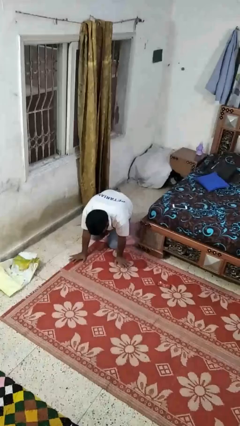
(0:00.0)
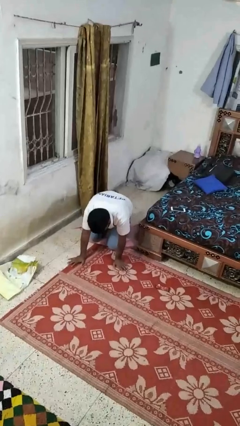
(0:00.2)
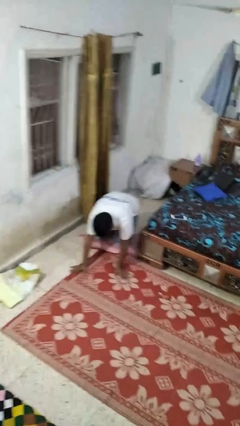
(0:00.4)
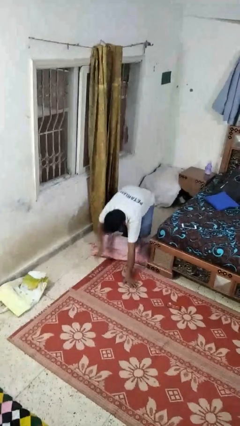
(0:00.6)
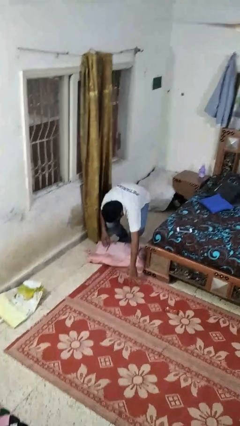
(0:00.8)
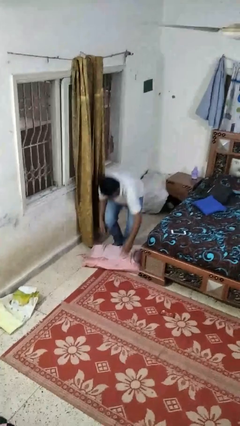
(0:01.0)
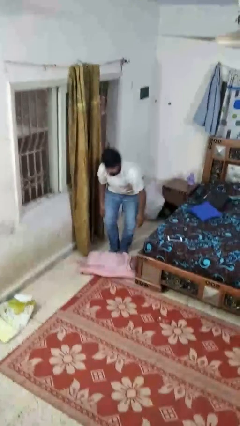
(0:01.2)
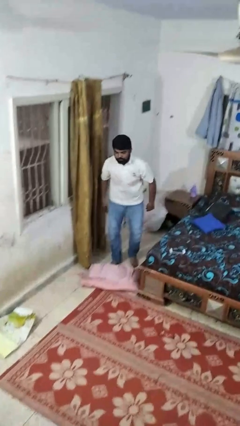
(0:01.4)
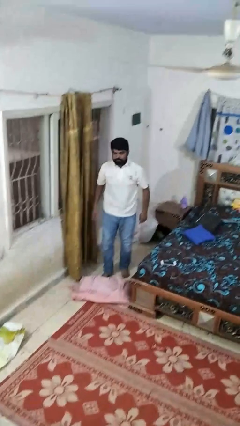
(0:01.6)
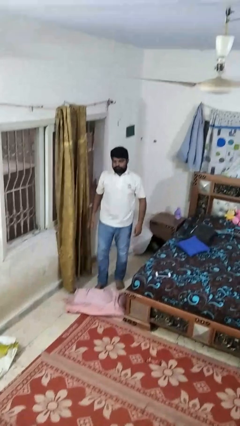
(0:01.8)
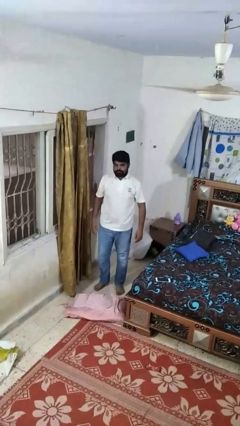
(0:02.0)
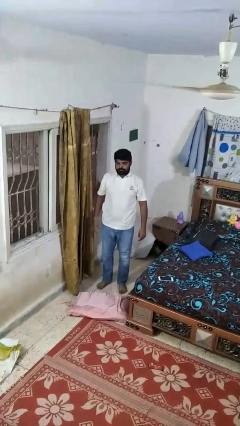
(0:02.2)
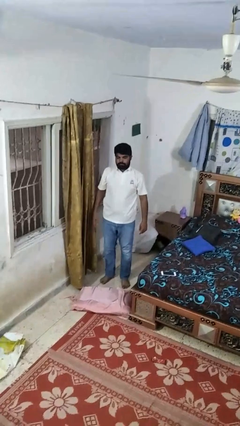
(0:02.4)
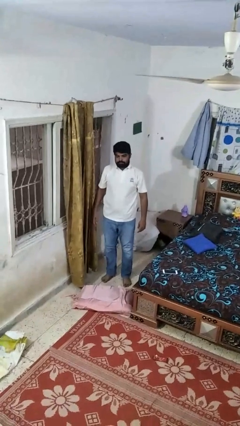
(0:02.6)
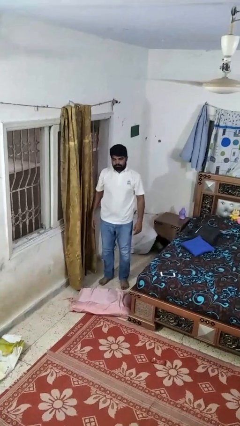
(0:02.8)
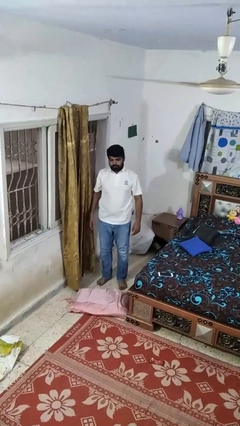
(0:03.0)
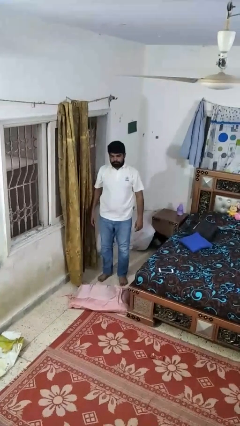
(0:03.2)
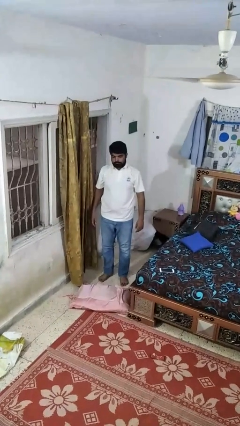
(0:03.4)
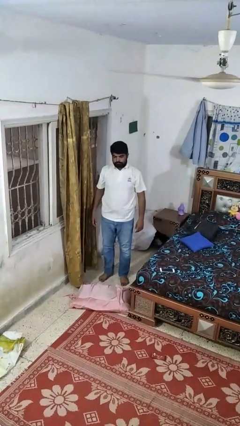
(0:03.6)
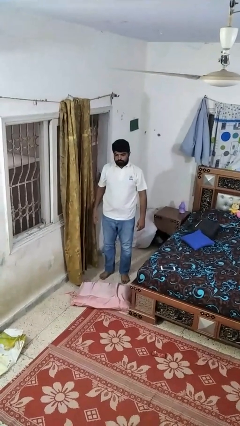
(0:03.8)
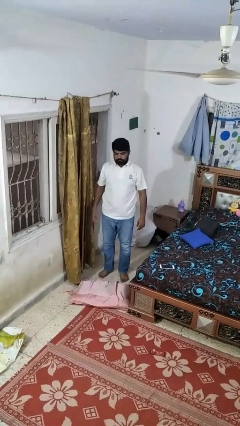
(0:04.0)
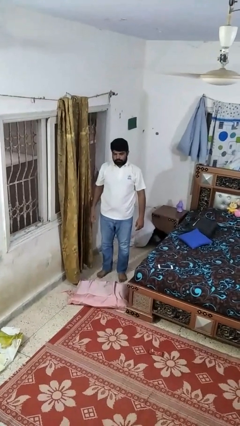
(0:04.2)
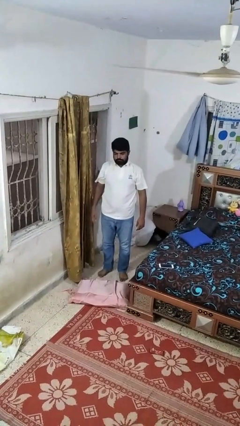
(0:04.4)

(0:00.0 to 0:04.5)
person stands up from floor

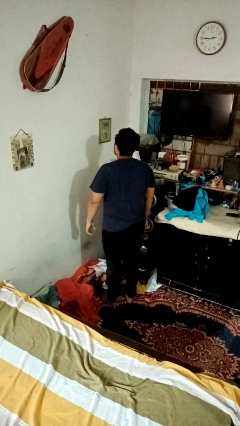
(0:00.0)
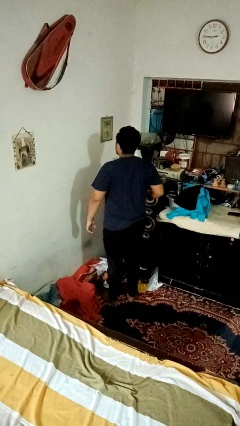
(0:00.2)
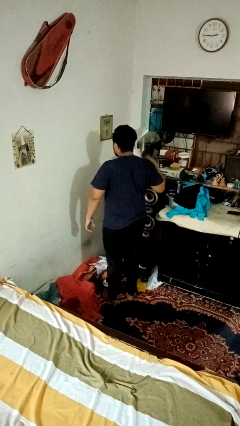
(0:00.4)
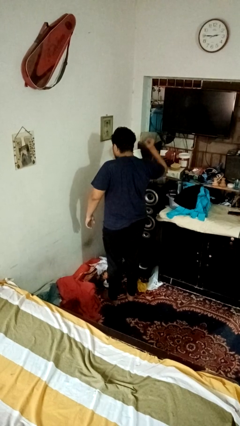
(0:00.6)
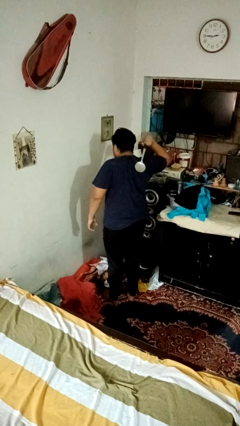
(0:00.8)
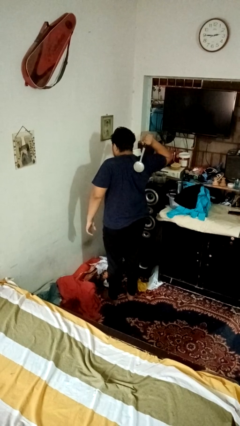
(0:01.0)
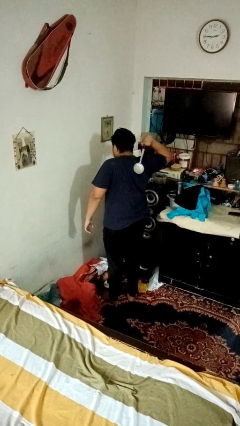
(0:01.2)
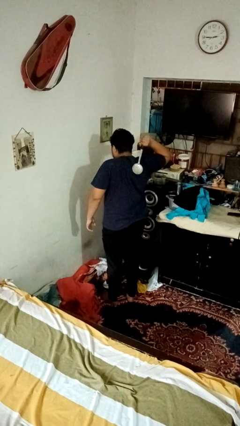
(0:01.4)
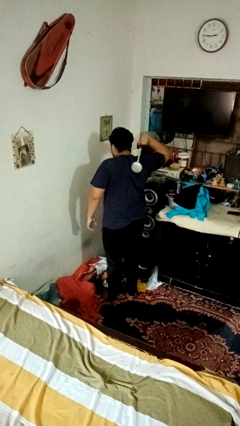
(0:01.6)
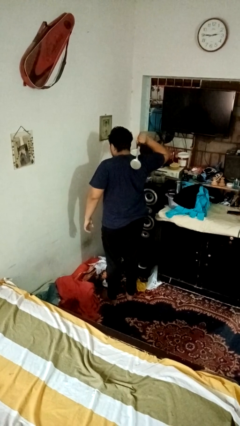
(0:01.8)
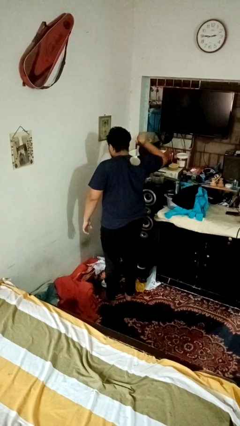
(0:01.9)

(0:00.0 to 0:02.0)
person swats bug

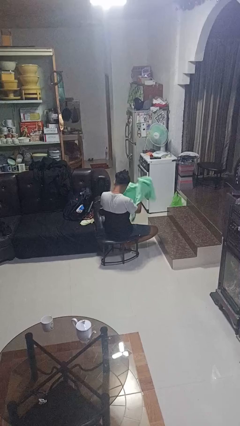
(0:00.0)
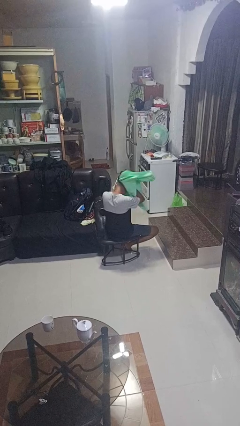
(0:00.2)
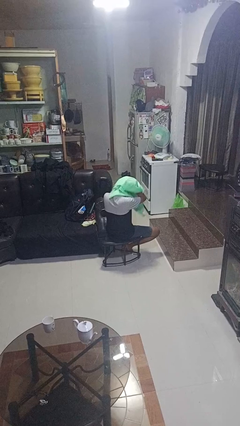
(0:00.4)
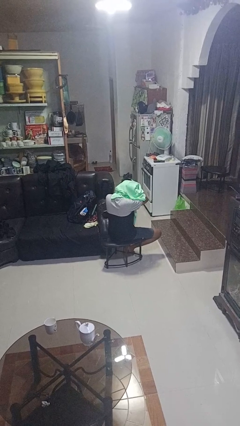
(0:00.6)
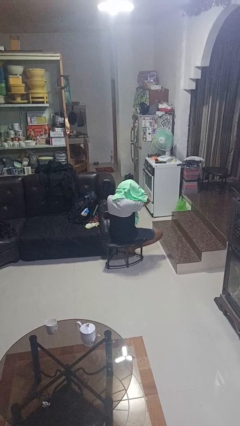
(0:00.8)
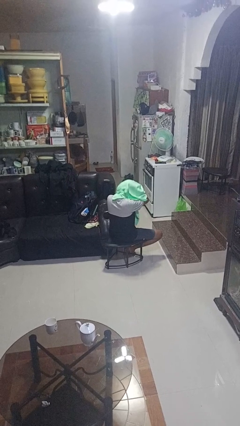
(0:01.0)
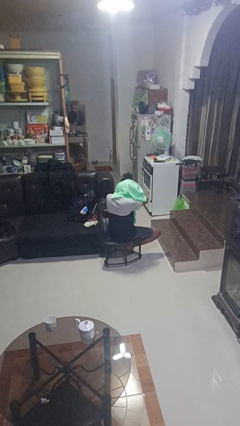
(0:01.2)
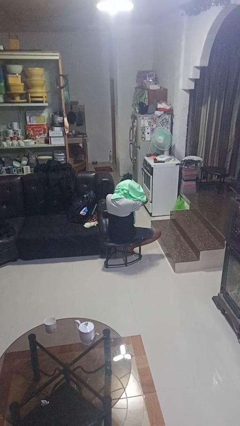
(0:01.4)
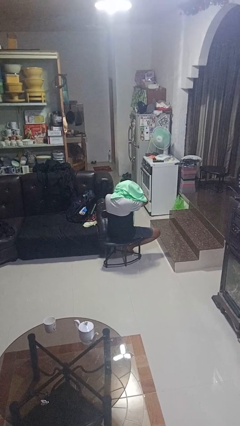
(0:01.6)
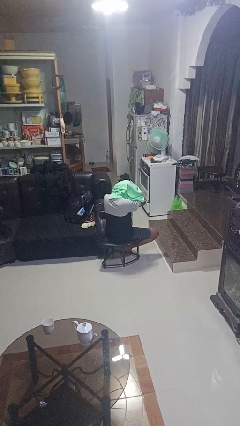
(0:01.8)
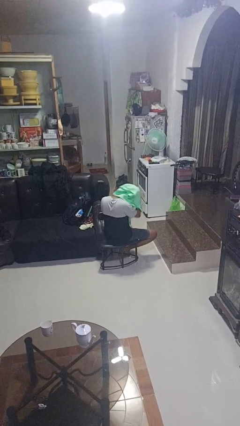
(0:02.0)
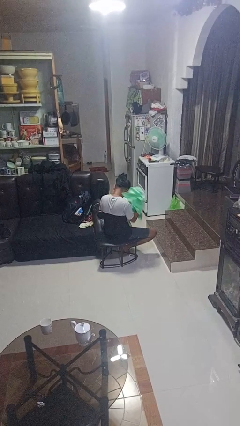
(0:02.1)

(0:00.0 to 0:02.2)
person dries hair with towel

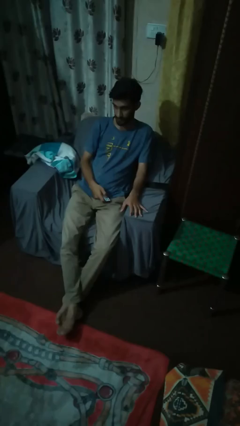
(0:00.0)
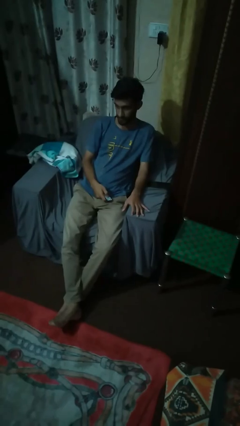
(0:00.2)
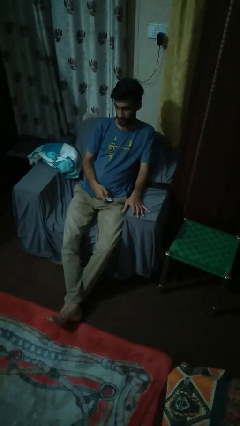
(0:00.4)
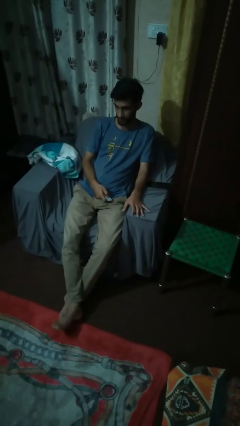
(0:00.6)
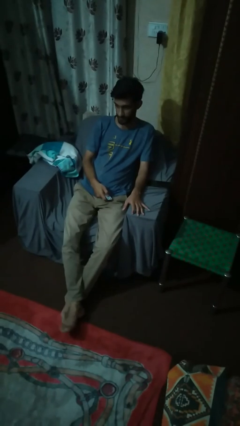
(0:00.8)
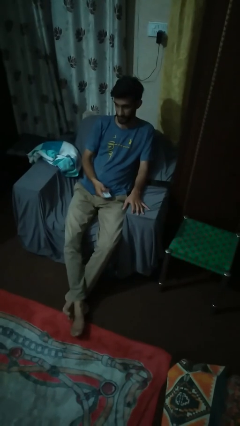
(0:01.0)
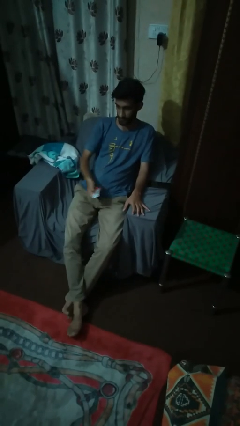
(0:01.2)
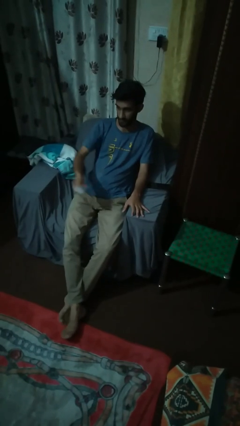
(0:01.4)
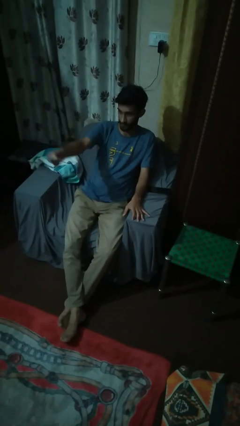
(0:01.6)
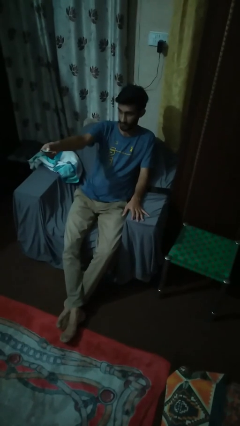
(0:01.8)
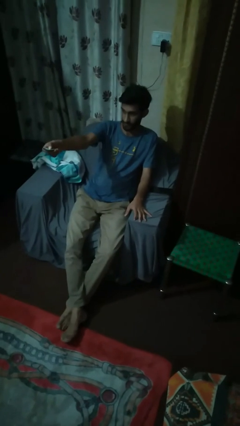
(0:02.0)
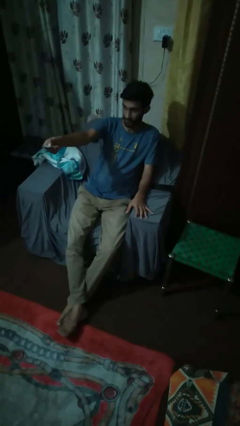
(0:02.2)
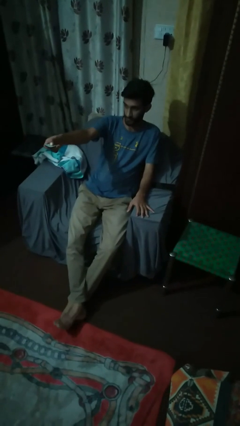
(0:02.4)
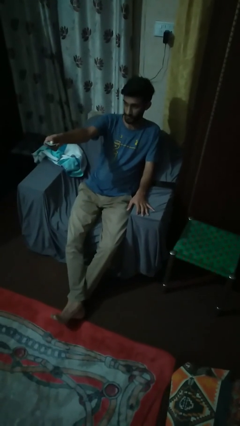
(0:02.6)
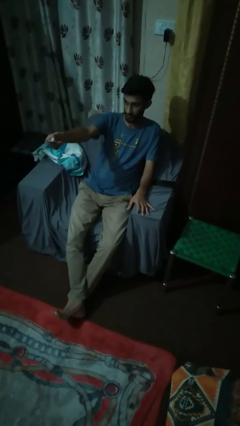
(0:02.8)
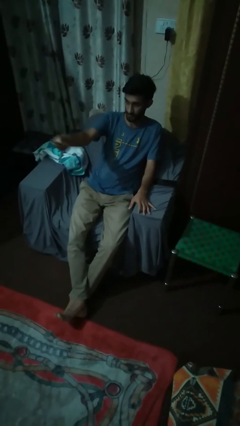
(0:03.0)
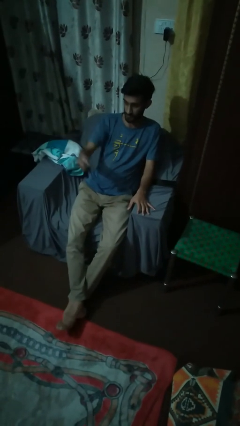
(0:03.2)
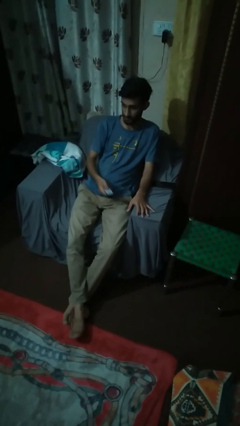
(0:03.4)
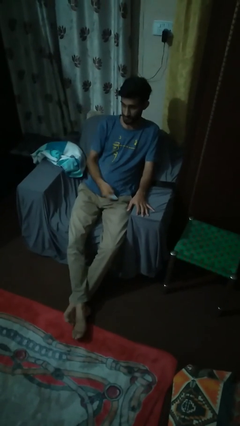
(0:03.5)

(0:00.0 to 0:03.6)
person uses television remote

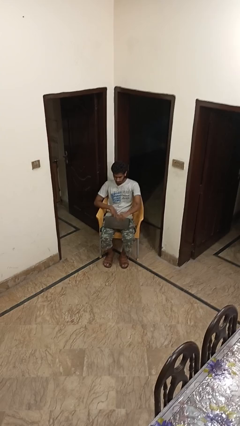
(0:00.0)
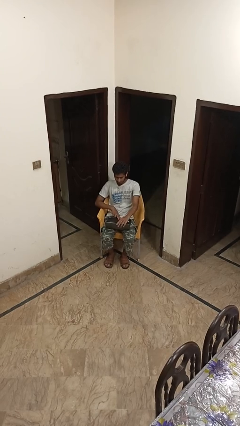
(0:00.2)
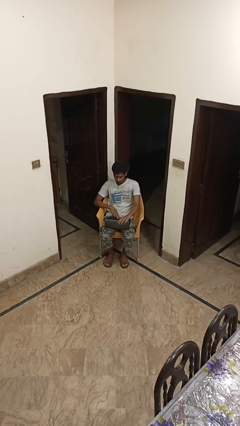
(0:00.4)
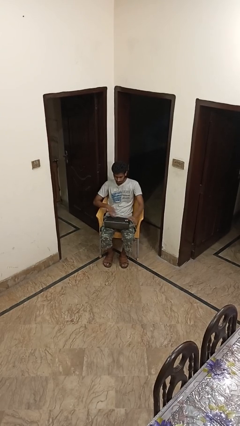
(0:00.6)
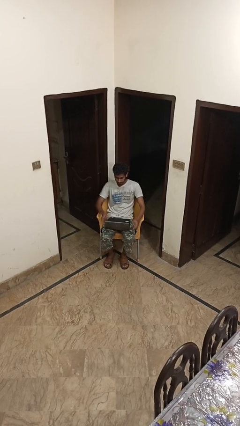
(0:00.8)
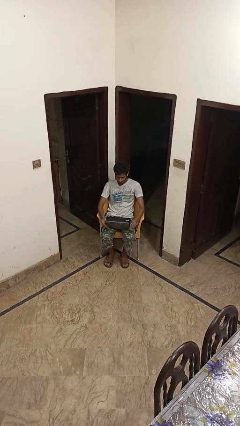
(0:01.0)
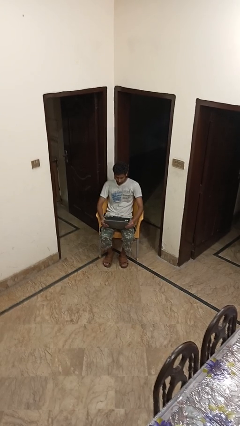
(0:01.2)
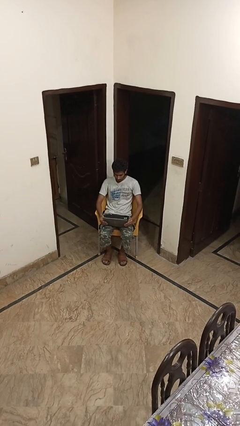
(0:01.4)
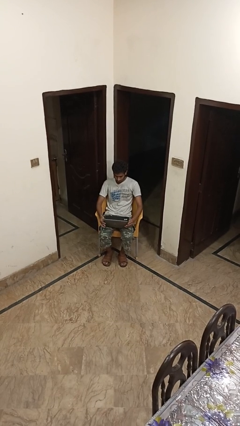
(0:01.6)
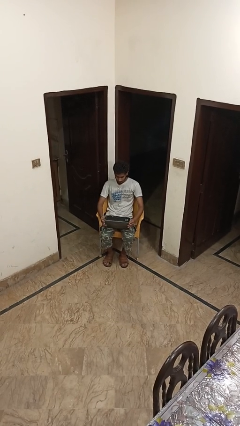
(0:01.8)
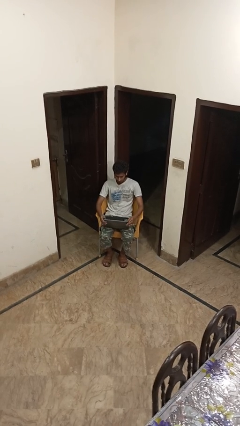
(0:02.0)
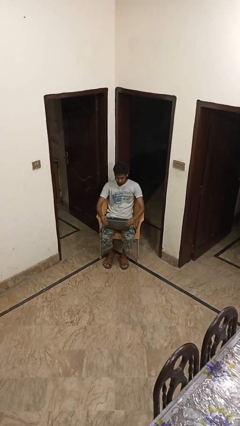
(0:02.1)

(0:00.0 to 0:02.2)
person opens laptop

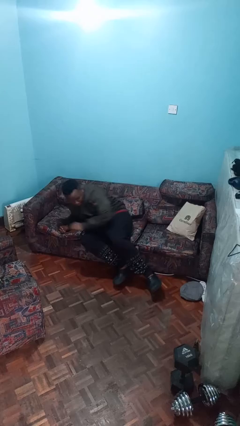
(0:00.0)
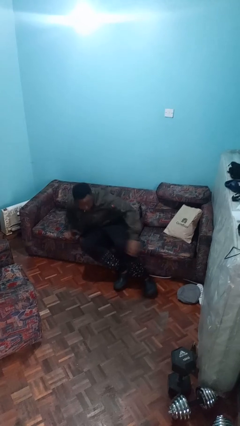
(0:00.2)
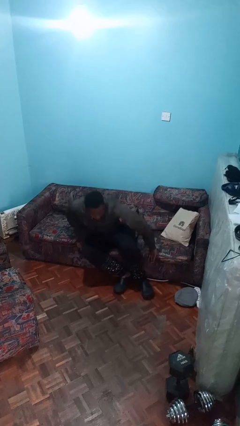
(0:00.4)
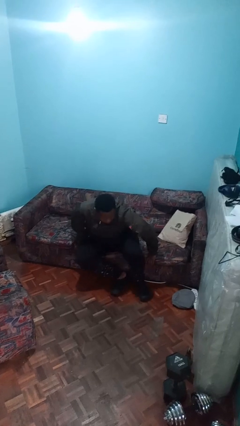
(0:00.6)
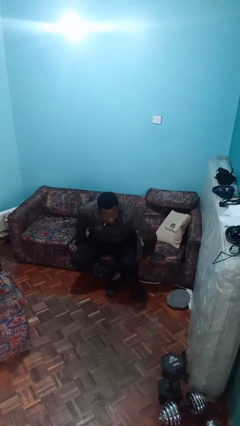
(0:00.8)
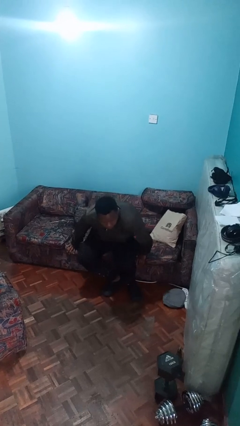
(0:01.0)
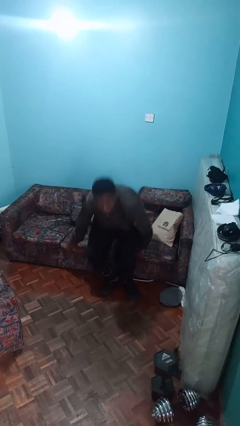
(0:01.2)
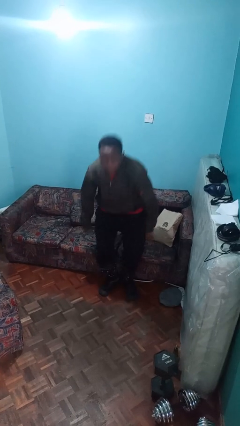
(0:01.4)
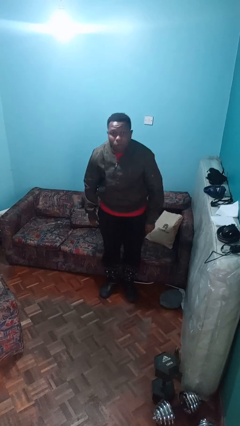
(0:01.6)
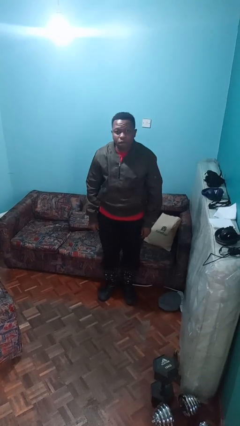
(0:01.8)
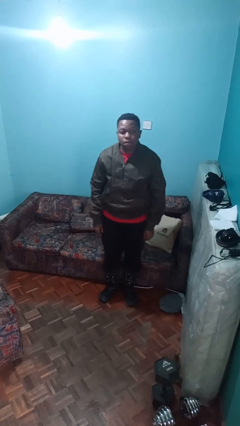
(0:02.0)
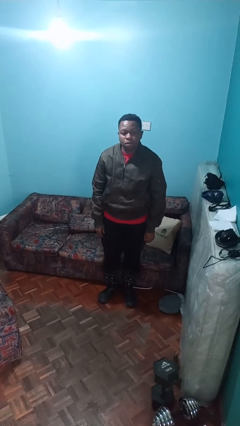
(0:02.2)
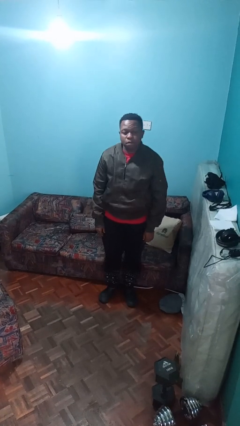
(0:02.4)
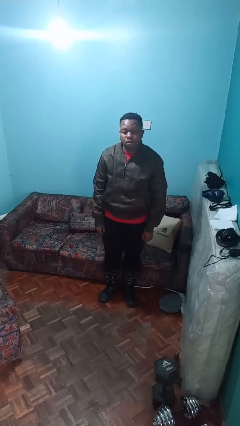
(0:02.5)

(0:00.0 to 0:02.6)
person stands up
